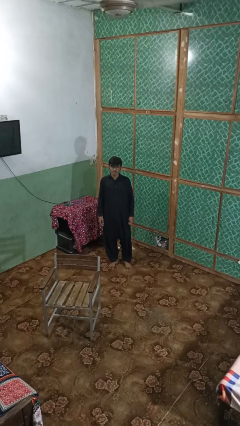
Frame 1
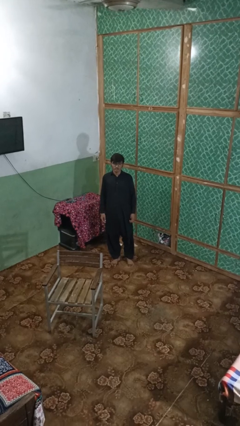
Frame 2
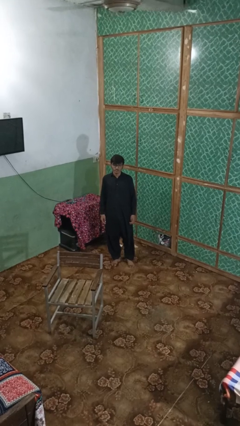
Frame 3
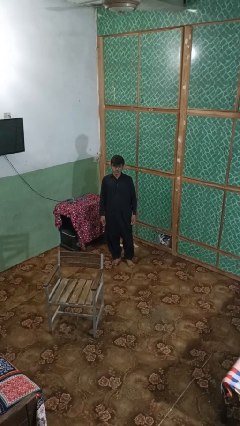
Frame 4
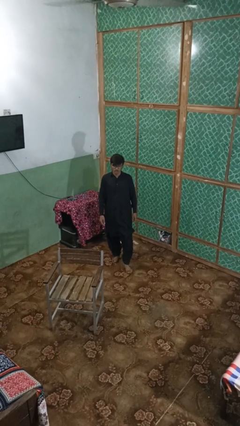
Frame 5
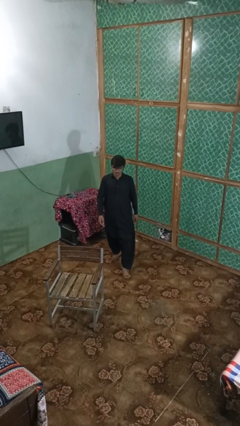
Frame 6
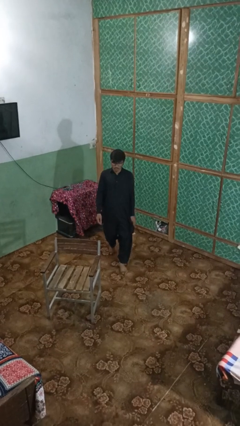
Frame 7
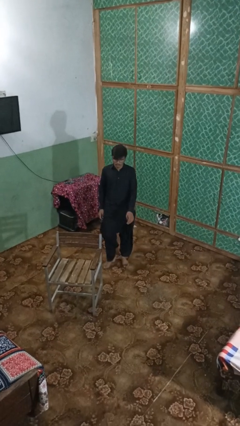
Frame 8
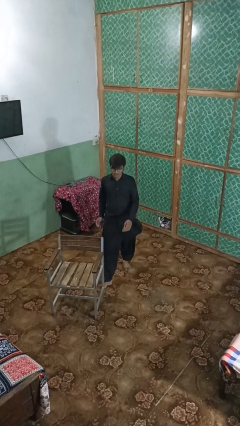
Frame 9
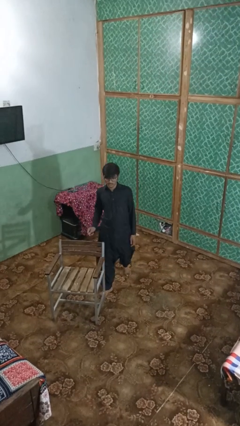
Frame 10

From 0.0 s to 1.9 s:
person trips on object on floor

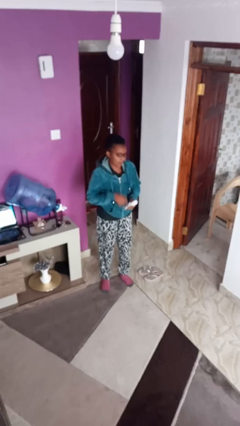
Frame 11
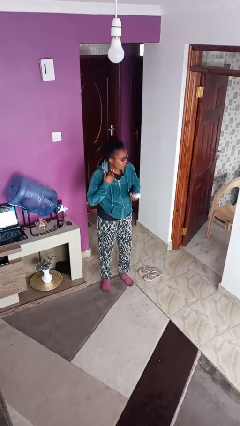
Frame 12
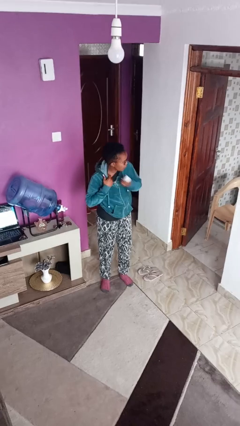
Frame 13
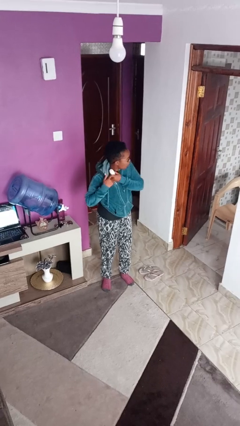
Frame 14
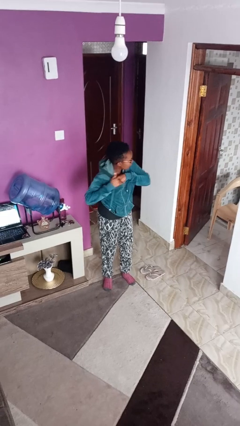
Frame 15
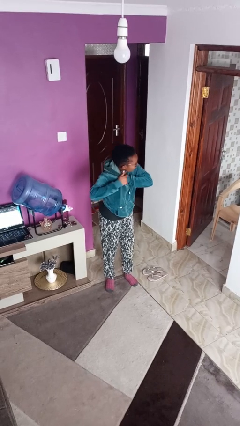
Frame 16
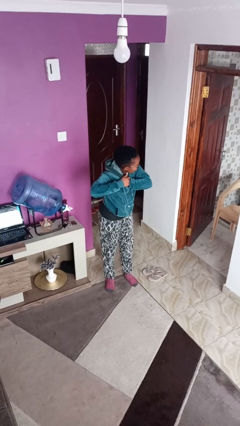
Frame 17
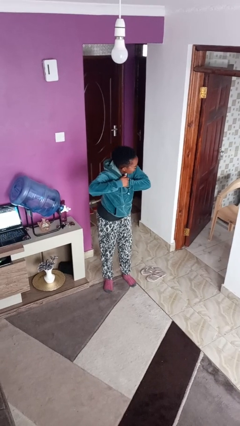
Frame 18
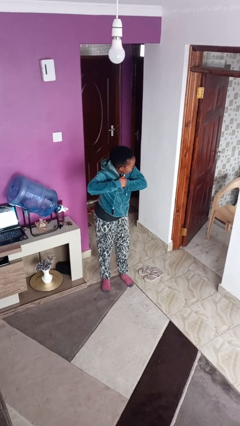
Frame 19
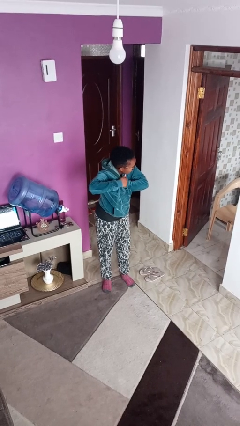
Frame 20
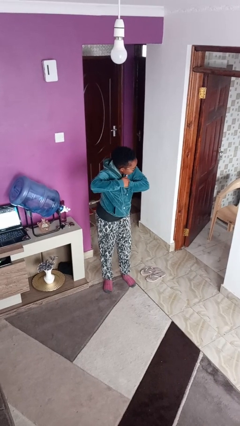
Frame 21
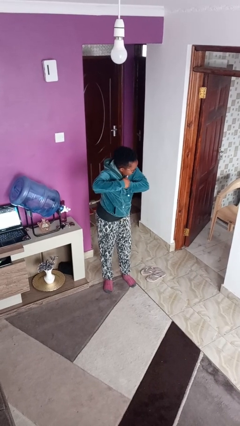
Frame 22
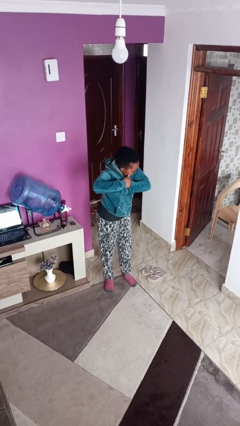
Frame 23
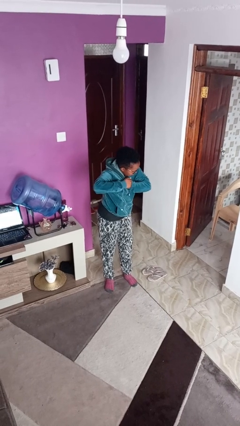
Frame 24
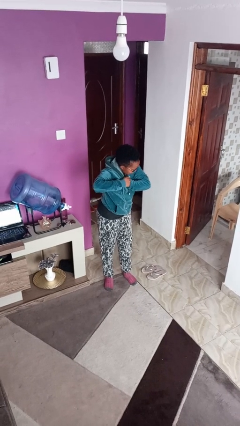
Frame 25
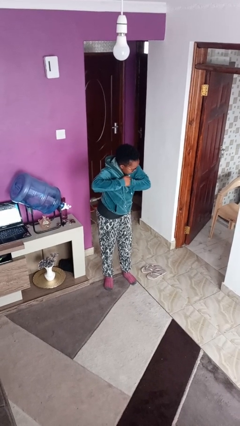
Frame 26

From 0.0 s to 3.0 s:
person applies deodorant

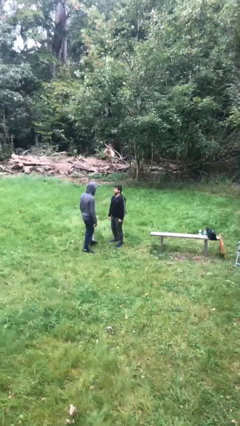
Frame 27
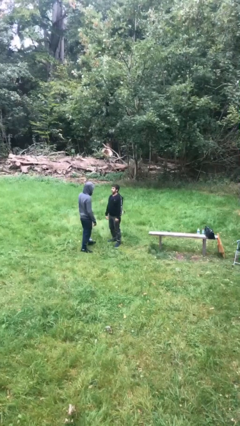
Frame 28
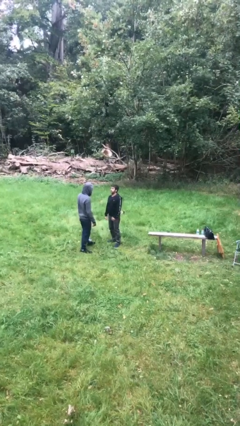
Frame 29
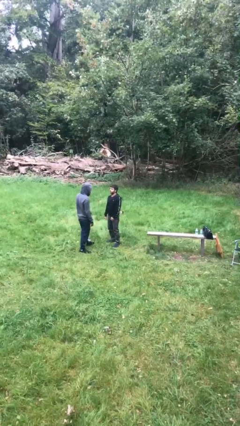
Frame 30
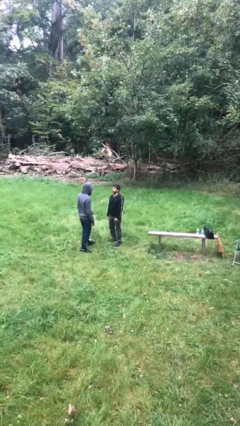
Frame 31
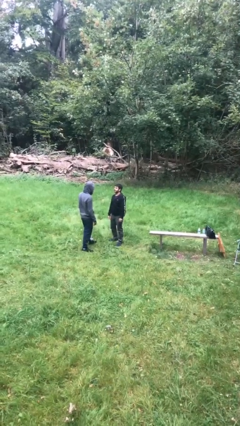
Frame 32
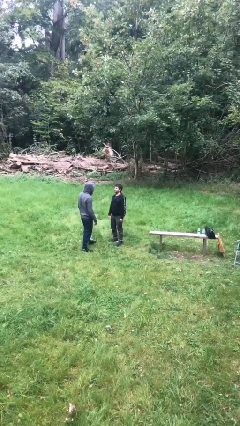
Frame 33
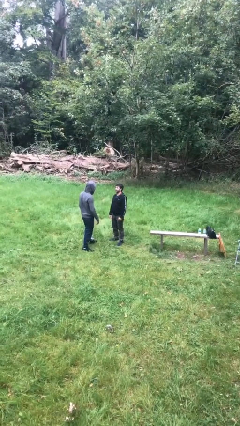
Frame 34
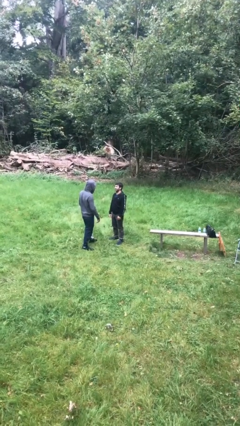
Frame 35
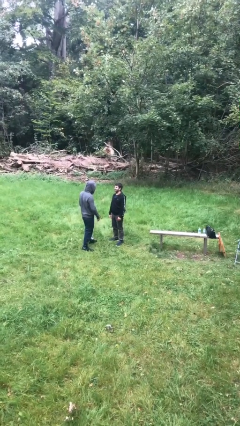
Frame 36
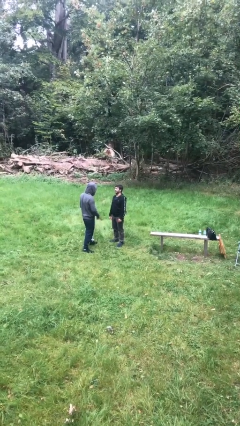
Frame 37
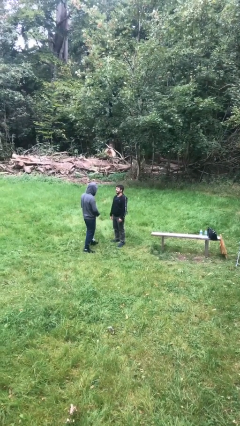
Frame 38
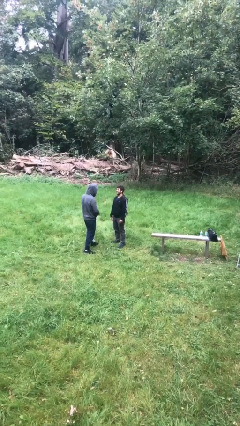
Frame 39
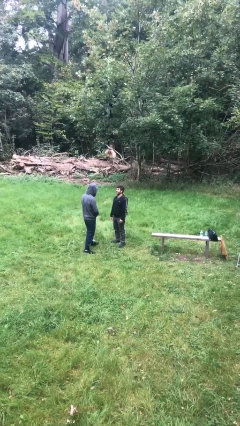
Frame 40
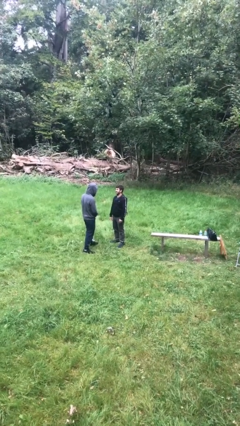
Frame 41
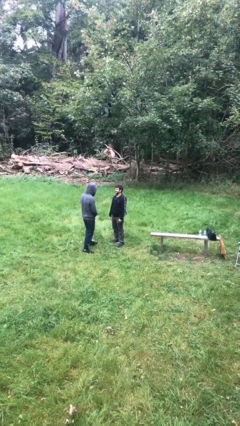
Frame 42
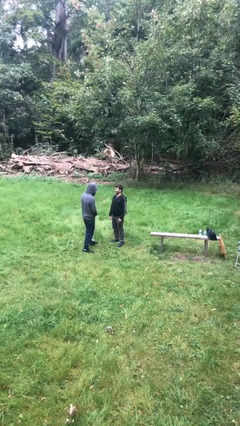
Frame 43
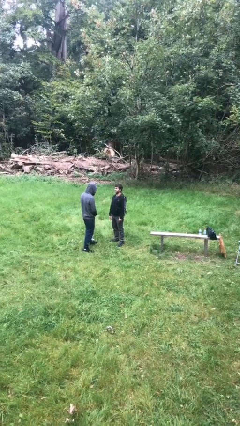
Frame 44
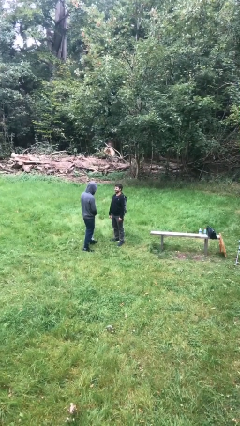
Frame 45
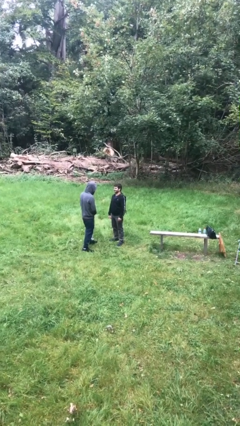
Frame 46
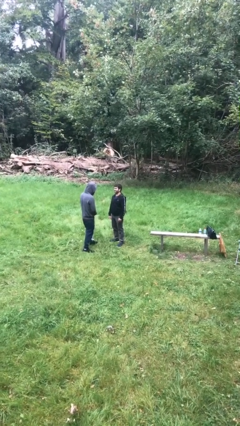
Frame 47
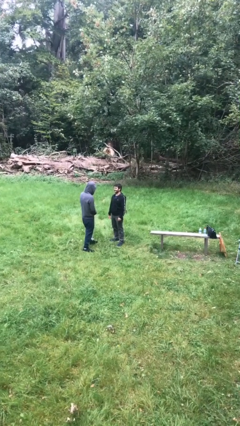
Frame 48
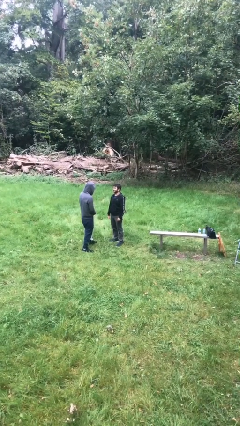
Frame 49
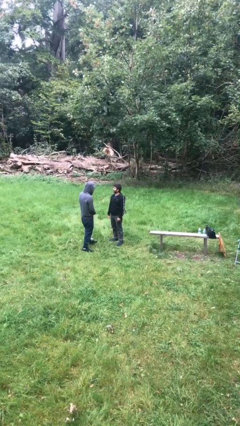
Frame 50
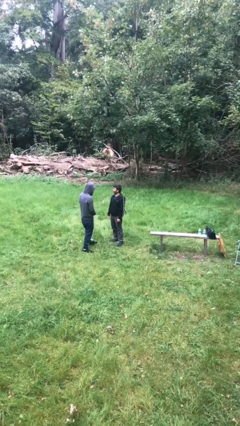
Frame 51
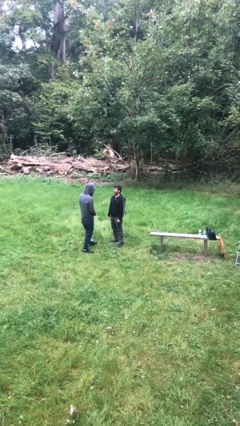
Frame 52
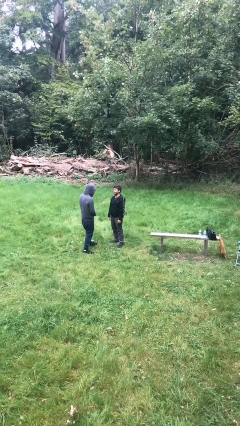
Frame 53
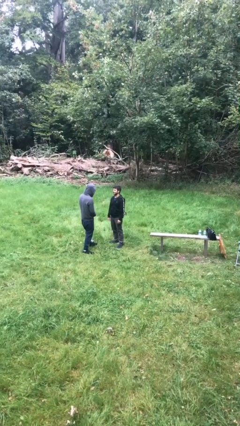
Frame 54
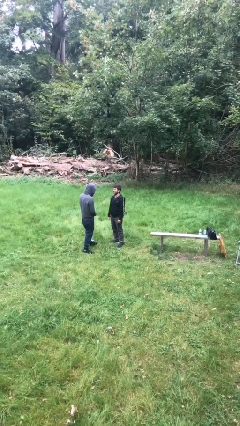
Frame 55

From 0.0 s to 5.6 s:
person talks to person

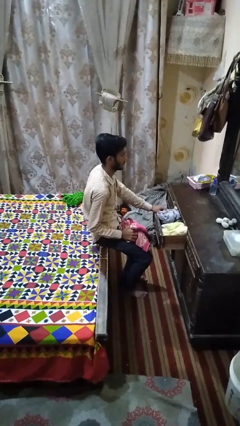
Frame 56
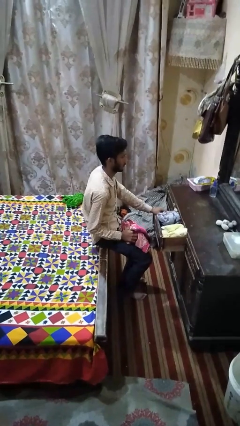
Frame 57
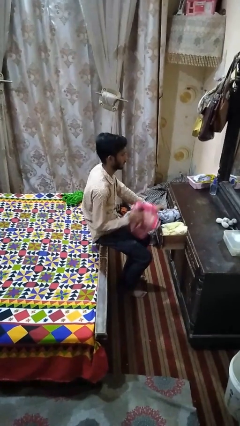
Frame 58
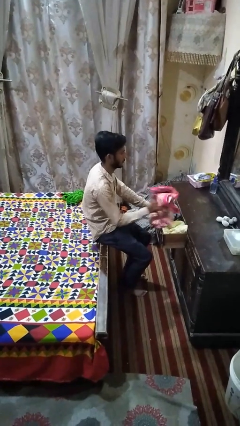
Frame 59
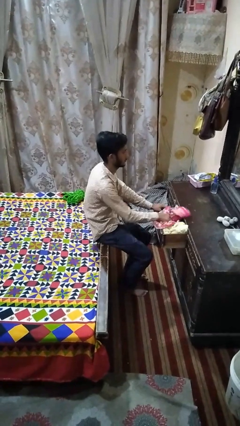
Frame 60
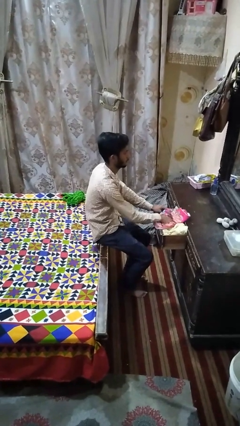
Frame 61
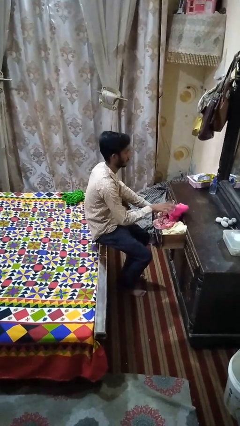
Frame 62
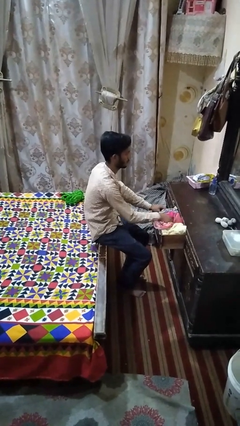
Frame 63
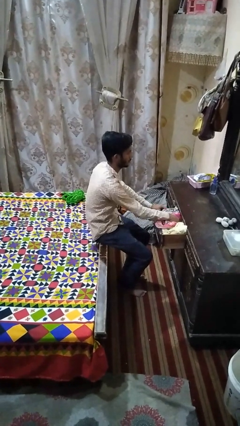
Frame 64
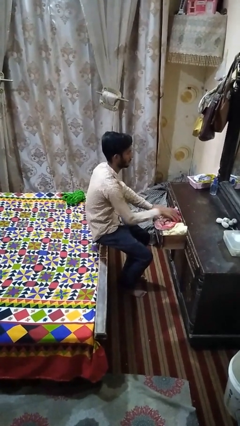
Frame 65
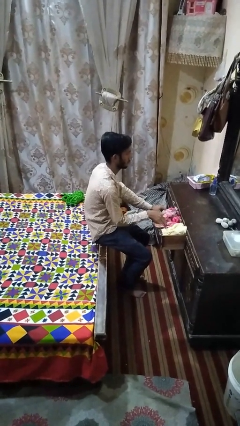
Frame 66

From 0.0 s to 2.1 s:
person puts clothes into dresser

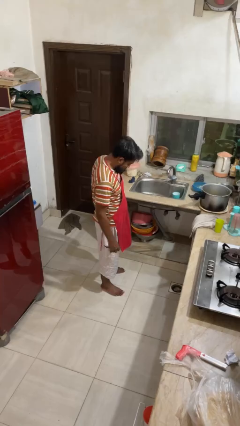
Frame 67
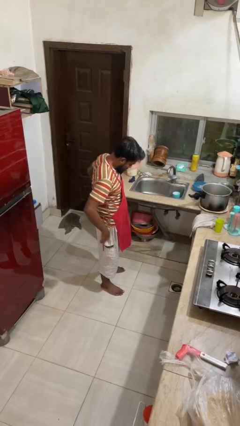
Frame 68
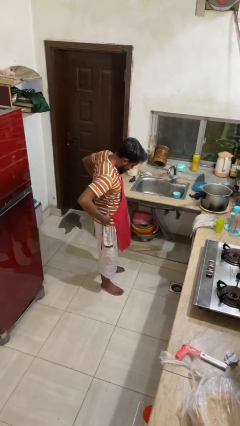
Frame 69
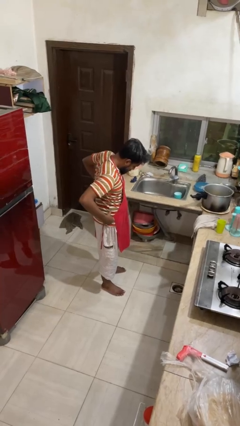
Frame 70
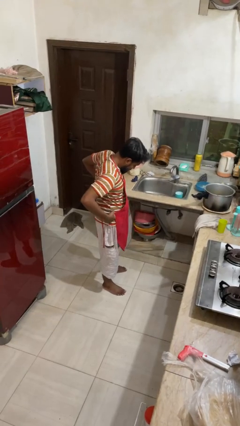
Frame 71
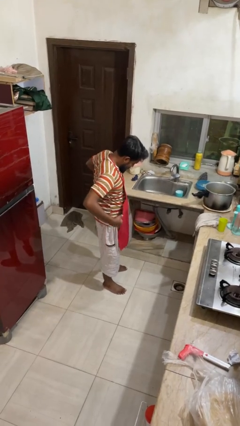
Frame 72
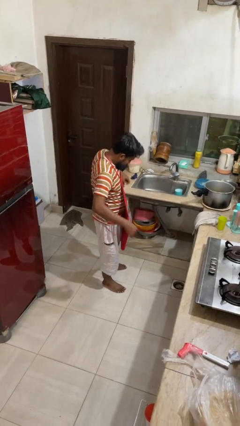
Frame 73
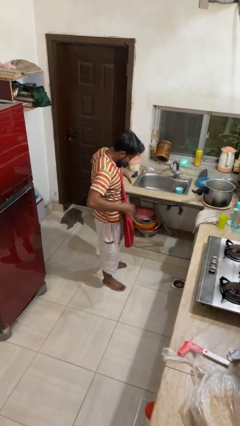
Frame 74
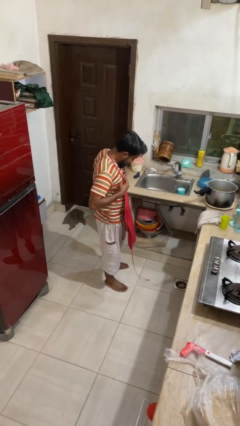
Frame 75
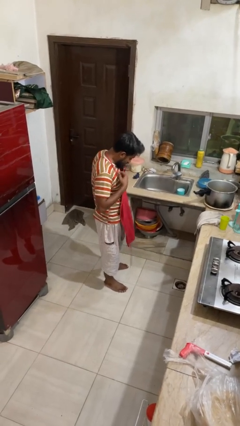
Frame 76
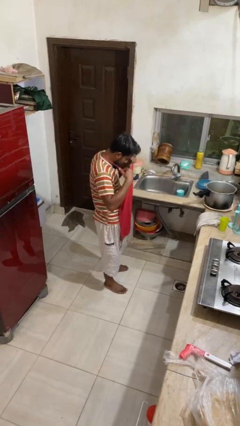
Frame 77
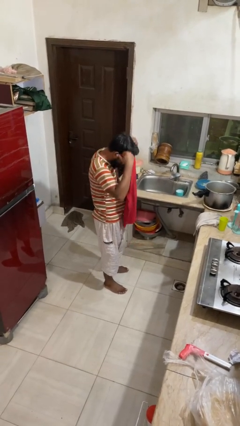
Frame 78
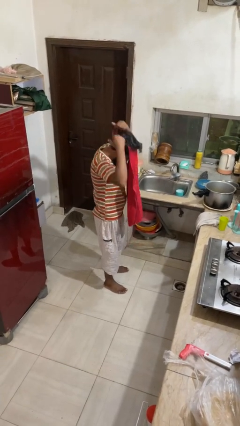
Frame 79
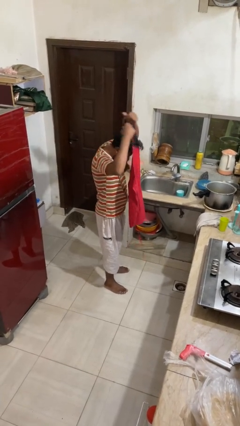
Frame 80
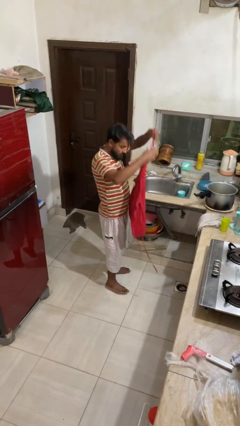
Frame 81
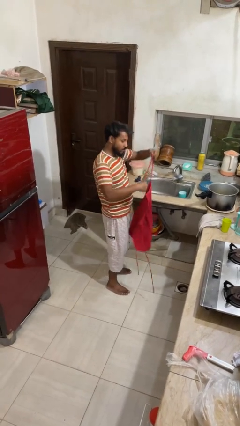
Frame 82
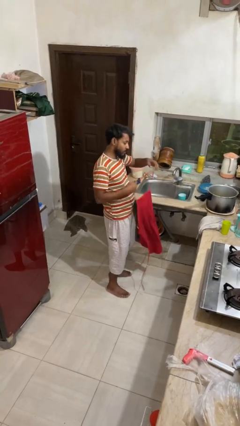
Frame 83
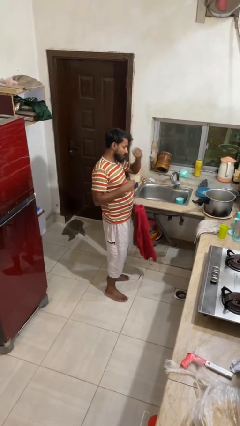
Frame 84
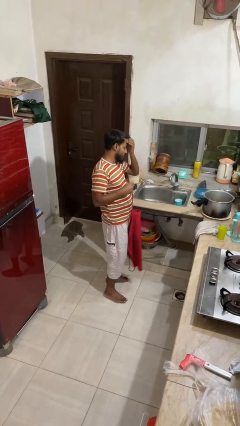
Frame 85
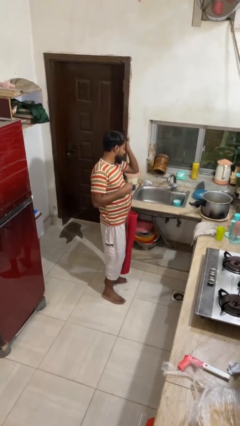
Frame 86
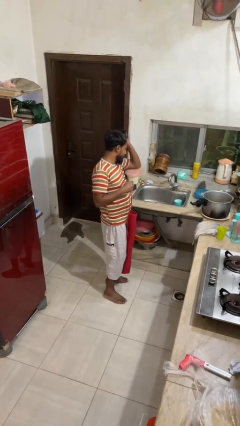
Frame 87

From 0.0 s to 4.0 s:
person takes off apron

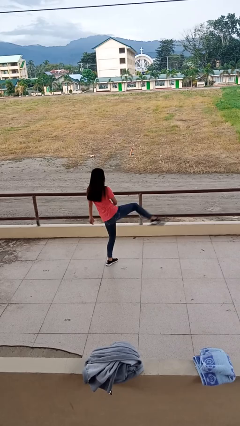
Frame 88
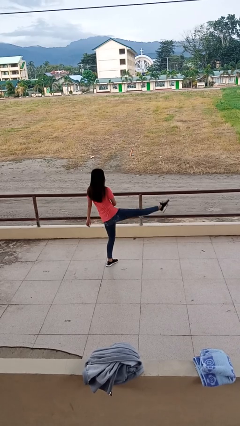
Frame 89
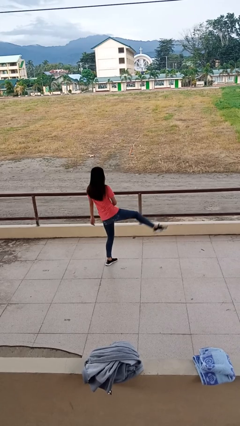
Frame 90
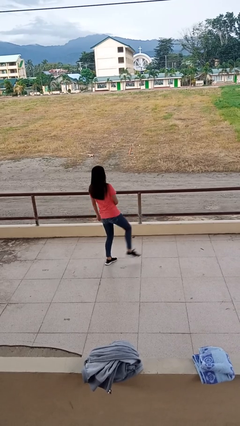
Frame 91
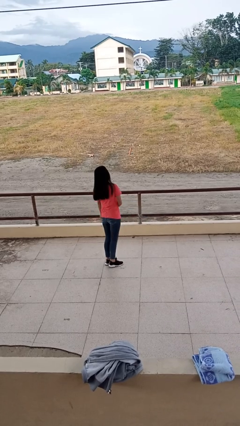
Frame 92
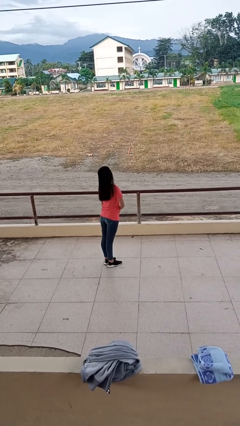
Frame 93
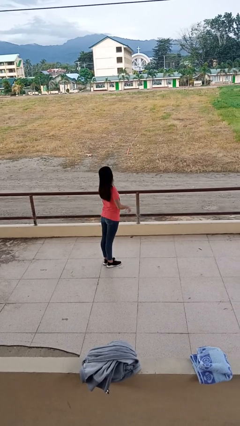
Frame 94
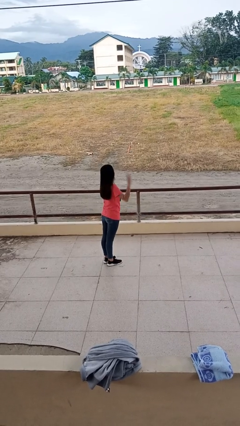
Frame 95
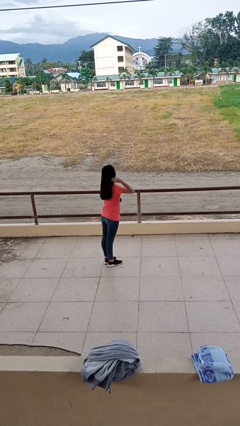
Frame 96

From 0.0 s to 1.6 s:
person karate kicks
